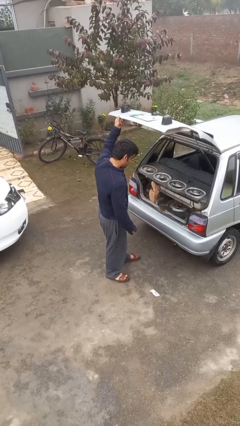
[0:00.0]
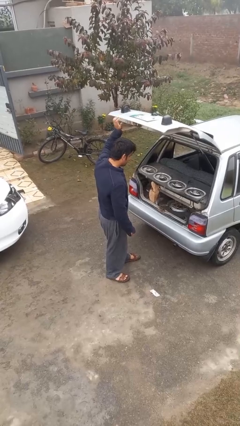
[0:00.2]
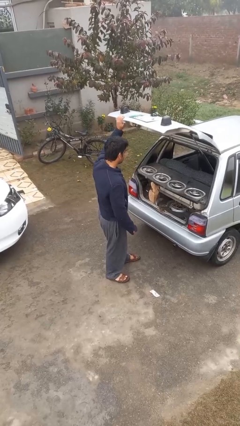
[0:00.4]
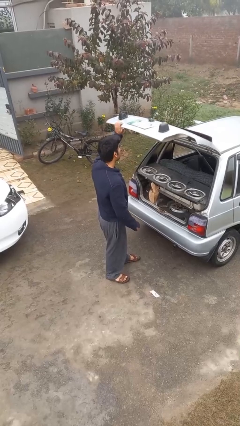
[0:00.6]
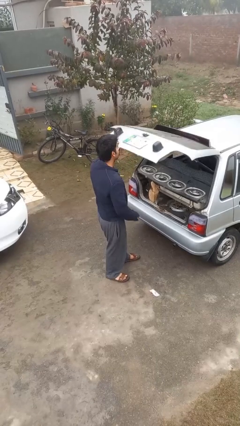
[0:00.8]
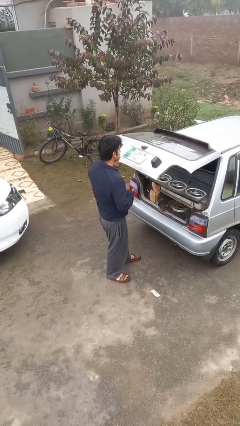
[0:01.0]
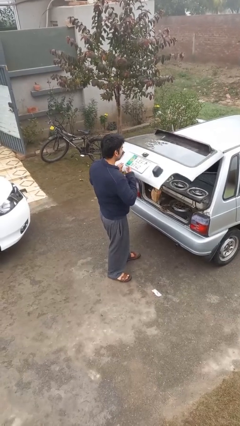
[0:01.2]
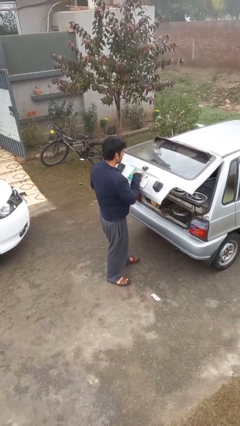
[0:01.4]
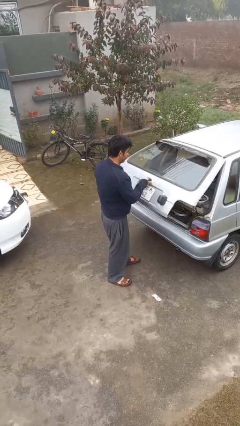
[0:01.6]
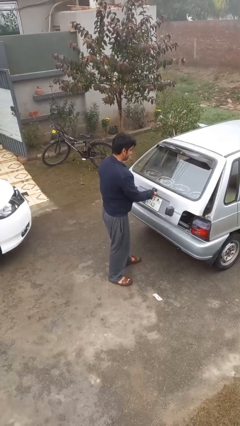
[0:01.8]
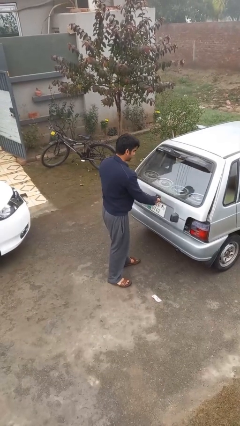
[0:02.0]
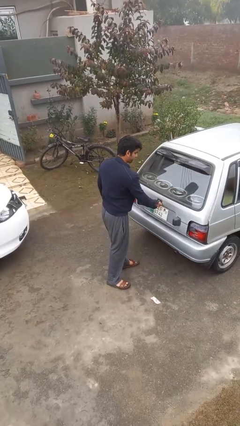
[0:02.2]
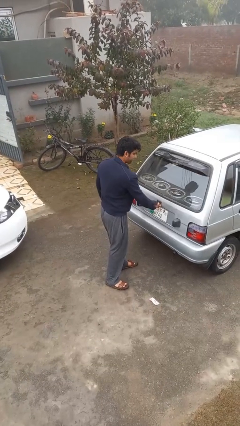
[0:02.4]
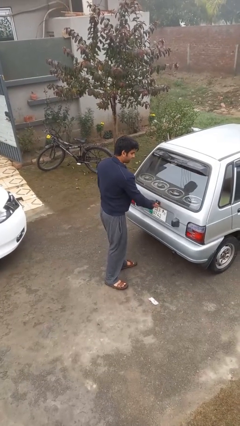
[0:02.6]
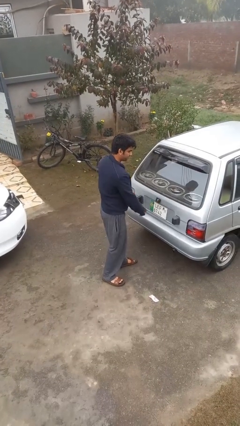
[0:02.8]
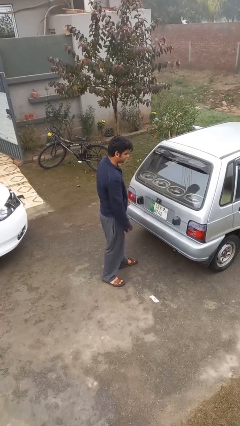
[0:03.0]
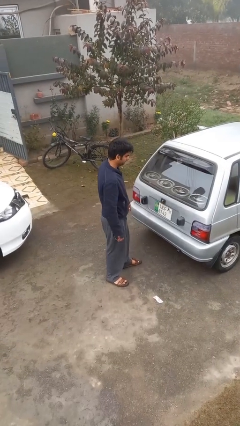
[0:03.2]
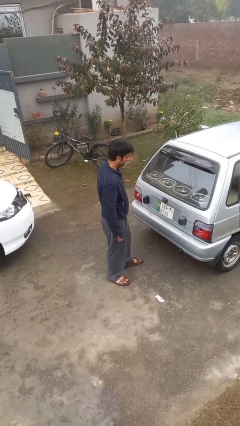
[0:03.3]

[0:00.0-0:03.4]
person closes car trunk

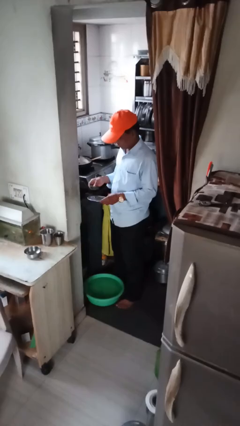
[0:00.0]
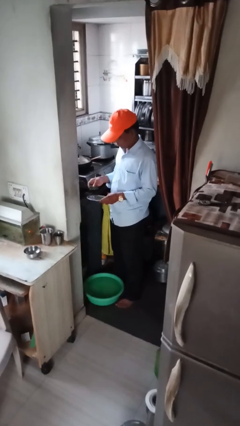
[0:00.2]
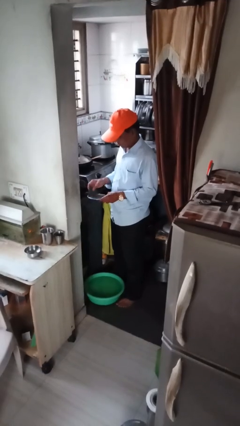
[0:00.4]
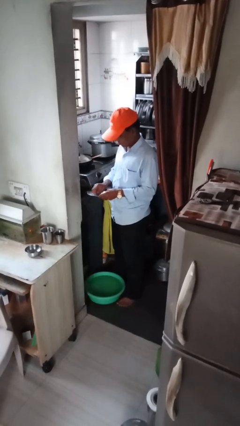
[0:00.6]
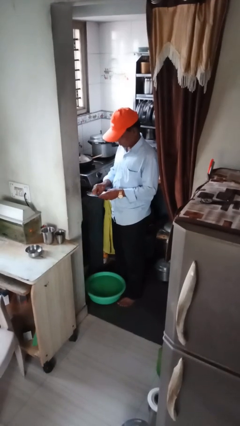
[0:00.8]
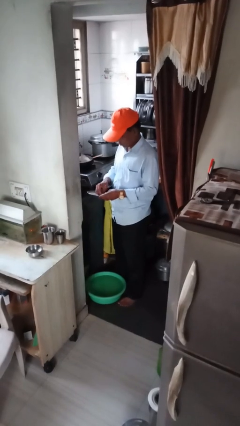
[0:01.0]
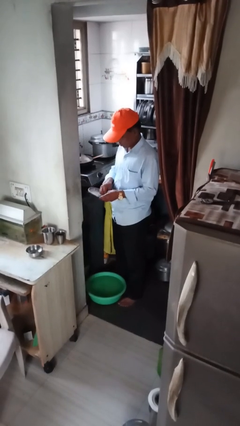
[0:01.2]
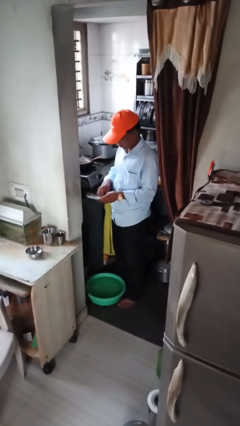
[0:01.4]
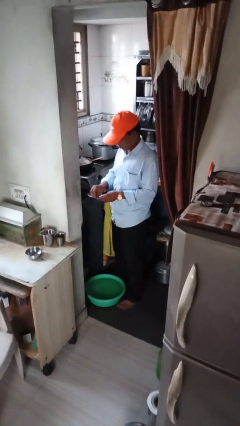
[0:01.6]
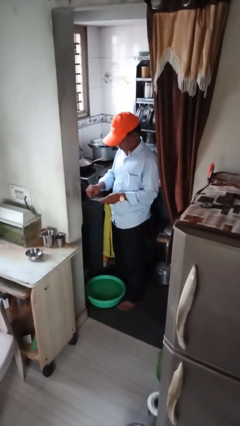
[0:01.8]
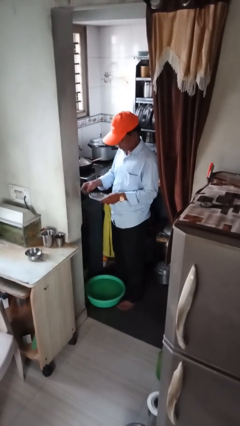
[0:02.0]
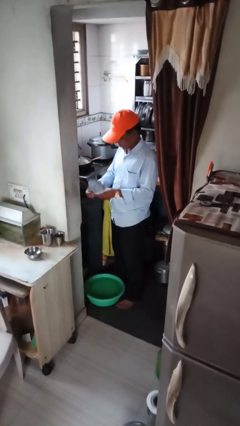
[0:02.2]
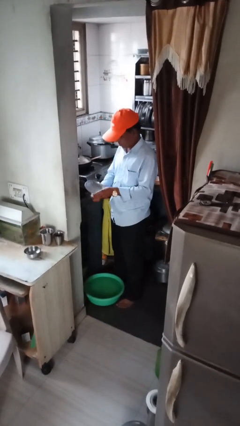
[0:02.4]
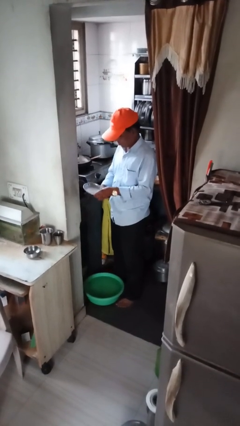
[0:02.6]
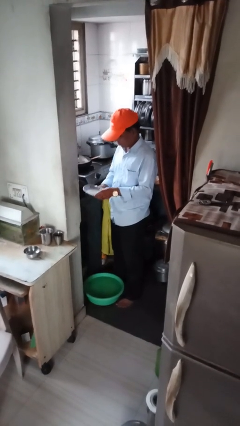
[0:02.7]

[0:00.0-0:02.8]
person washes dish

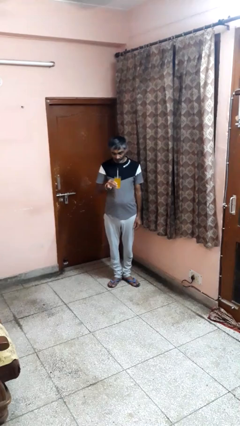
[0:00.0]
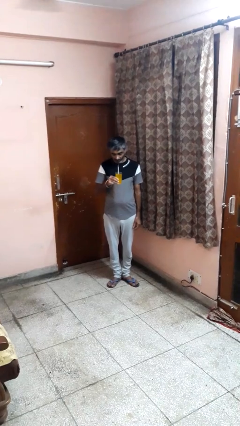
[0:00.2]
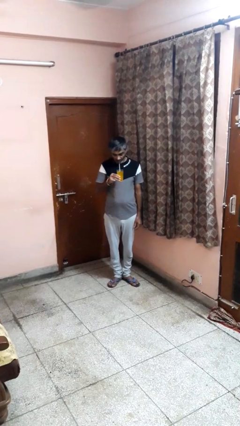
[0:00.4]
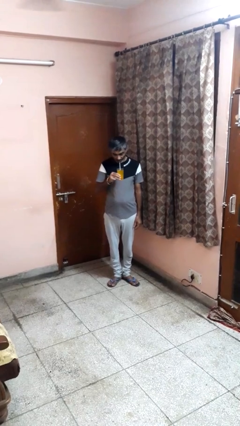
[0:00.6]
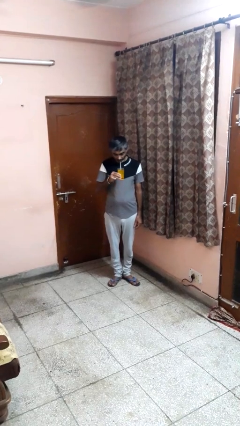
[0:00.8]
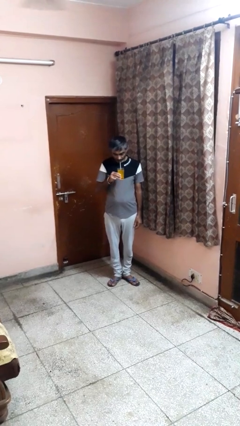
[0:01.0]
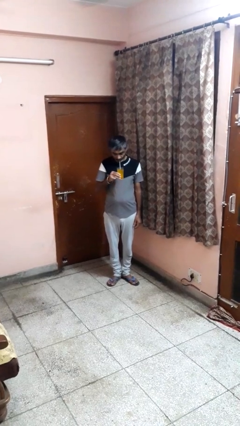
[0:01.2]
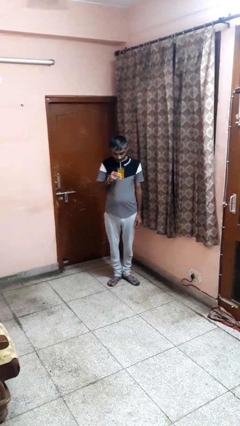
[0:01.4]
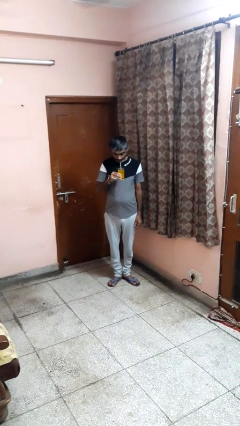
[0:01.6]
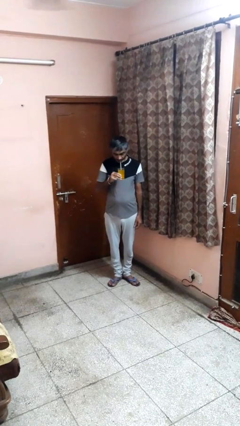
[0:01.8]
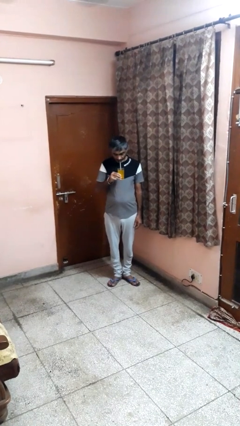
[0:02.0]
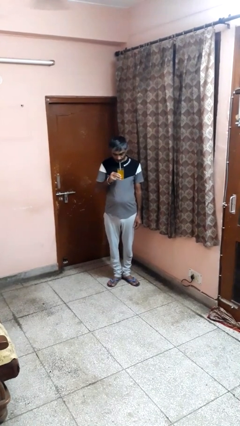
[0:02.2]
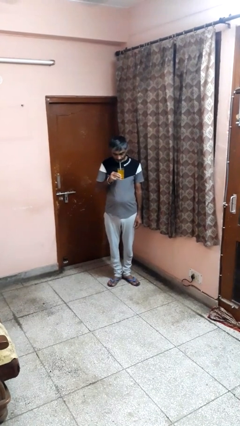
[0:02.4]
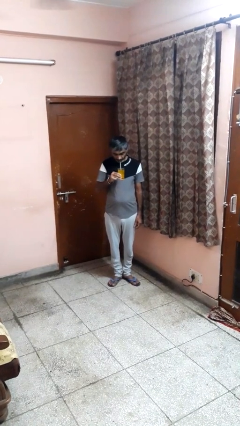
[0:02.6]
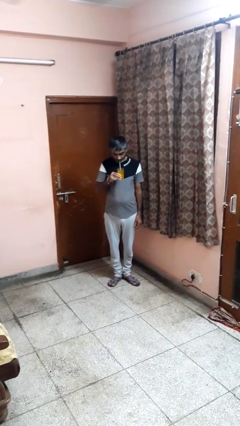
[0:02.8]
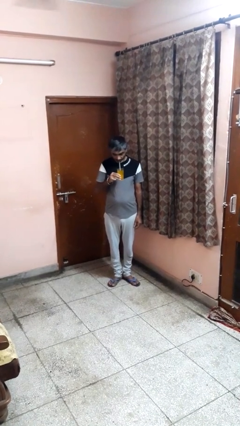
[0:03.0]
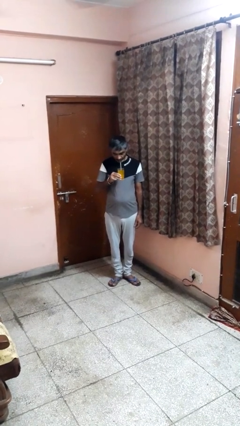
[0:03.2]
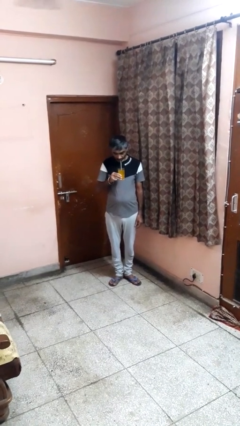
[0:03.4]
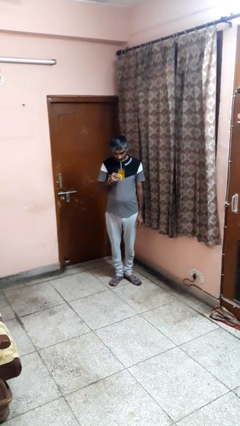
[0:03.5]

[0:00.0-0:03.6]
person drinks from straw

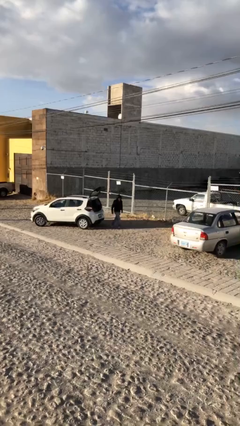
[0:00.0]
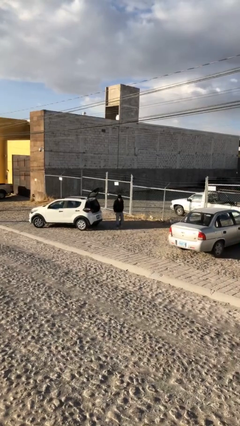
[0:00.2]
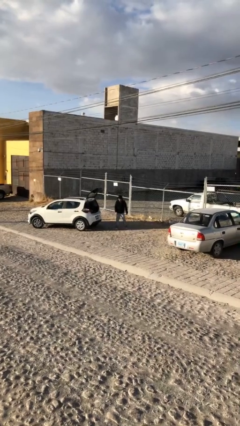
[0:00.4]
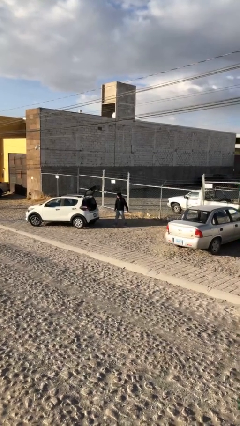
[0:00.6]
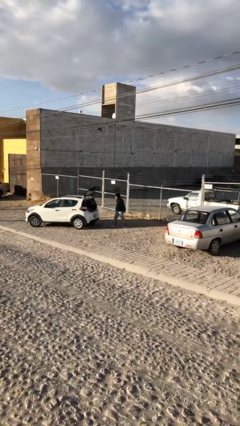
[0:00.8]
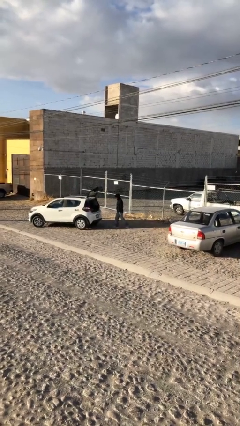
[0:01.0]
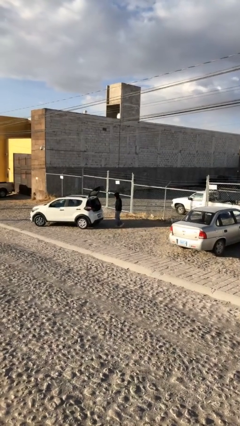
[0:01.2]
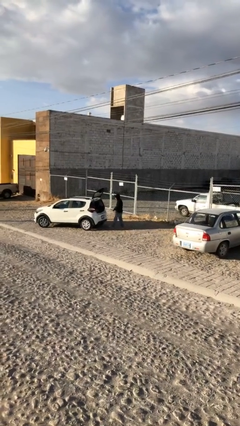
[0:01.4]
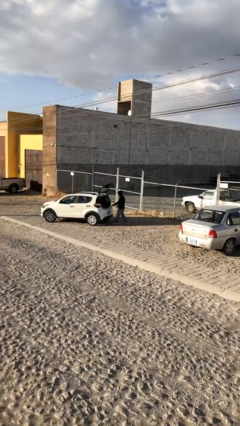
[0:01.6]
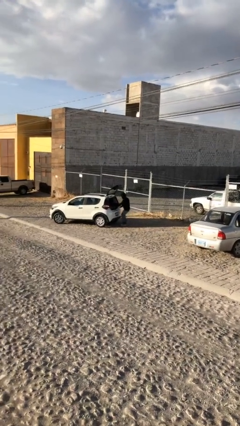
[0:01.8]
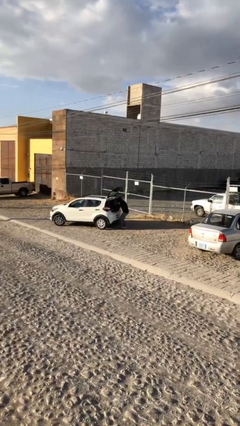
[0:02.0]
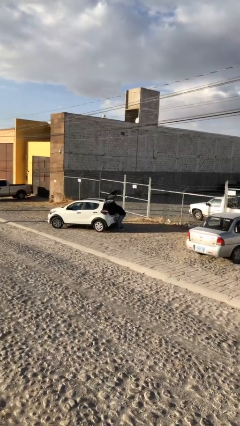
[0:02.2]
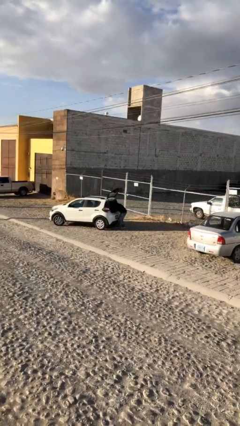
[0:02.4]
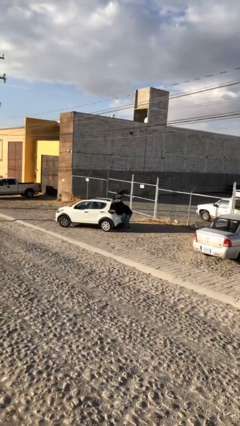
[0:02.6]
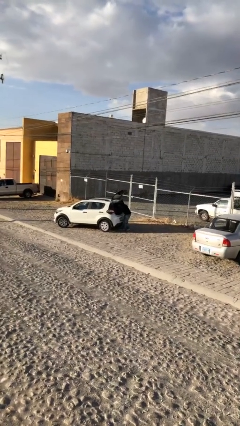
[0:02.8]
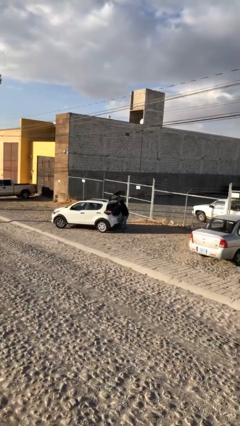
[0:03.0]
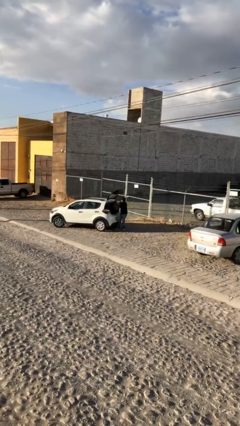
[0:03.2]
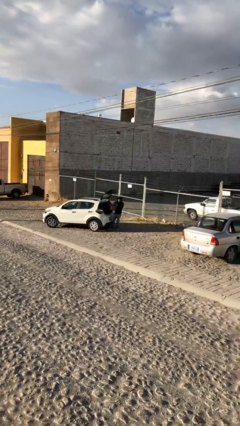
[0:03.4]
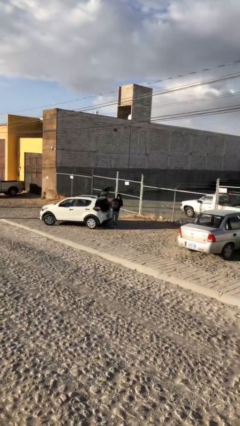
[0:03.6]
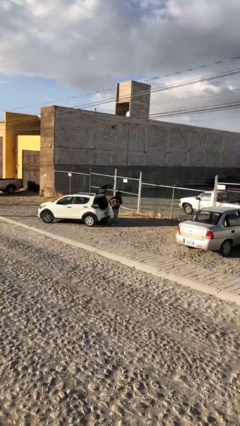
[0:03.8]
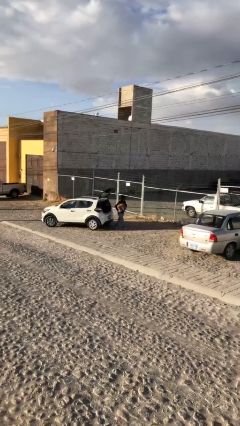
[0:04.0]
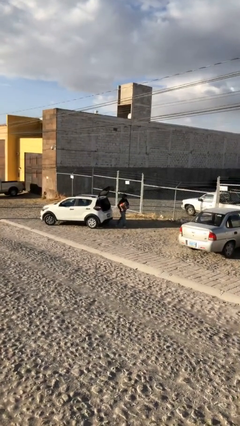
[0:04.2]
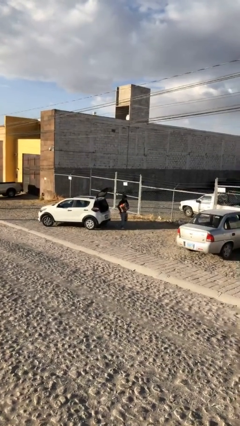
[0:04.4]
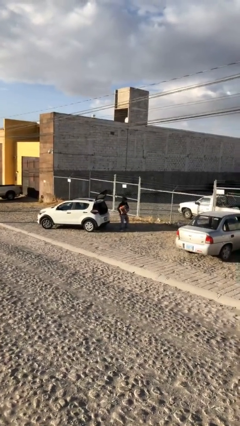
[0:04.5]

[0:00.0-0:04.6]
person unloads car

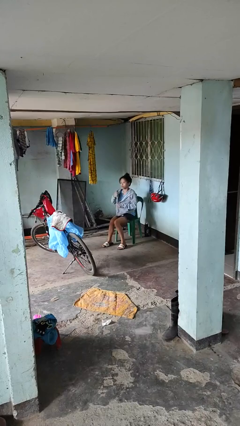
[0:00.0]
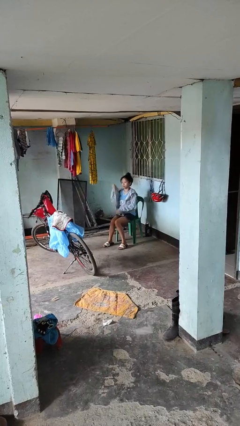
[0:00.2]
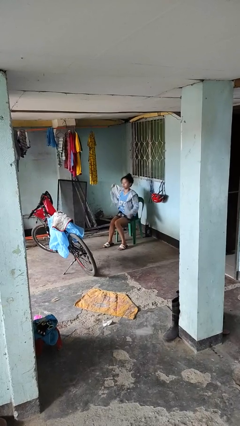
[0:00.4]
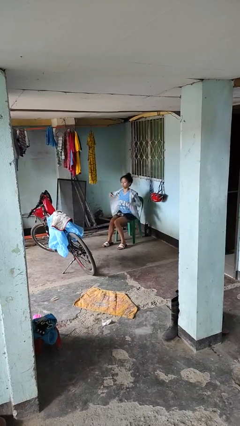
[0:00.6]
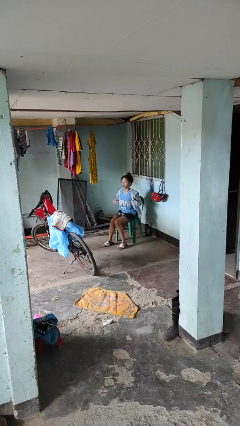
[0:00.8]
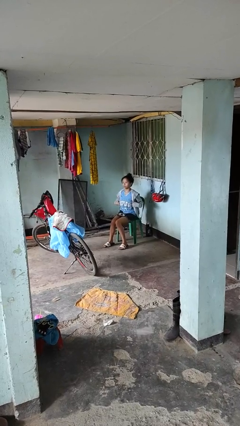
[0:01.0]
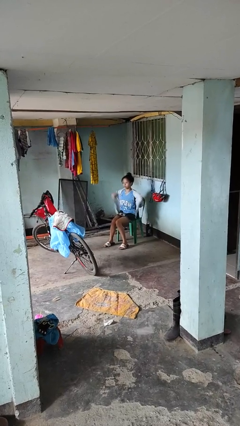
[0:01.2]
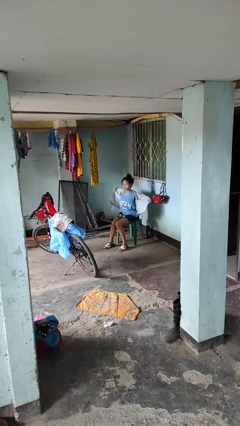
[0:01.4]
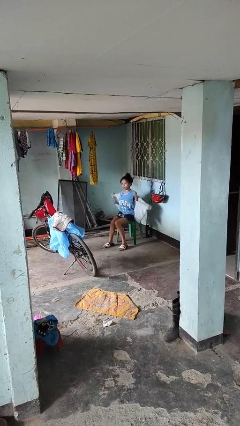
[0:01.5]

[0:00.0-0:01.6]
person unzips jacket

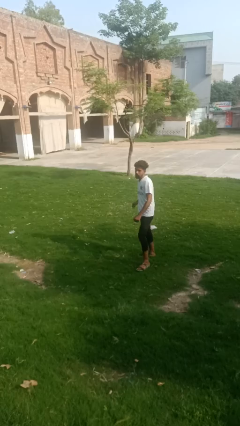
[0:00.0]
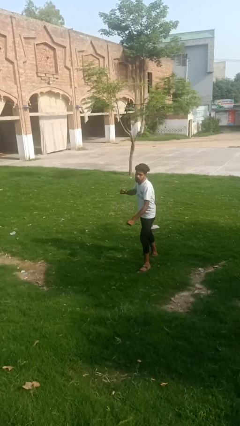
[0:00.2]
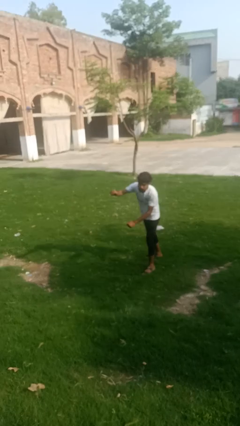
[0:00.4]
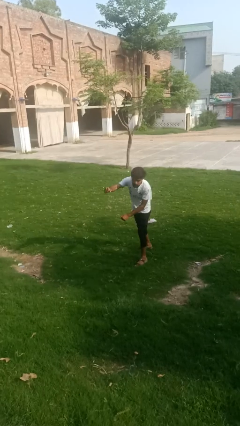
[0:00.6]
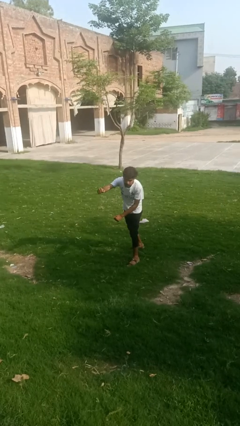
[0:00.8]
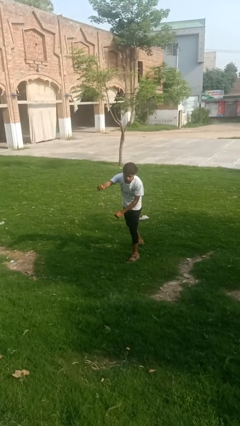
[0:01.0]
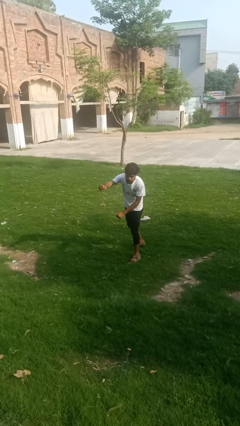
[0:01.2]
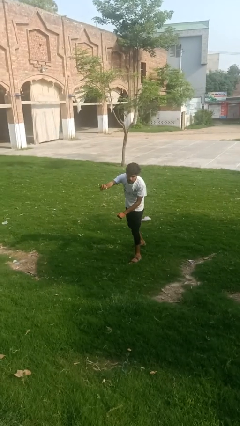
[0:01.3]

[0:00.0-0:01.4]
person punches
